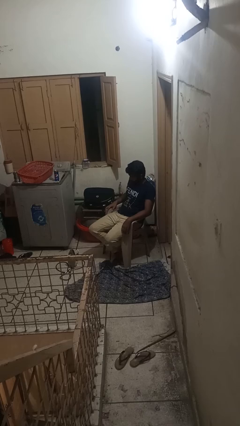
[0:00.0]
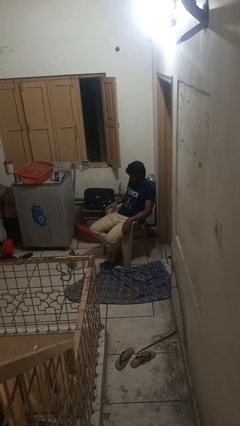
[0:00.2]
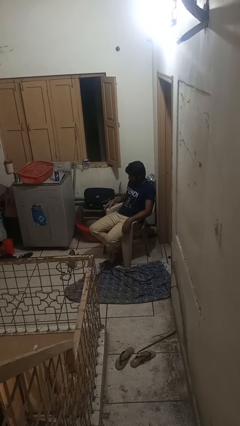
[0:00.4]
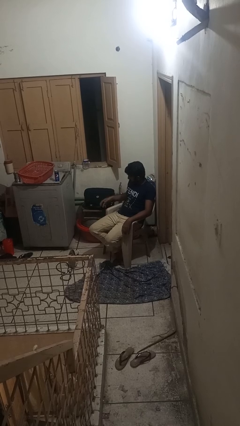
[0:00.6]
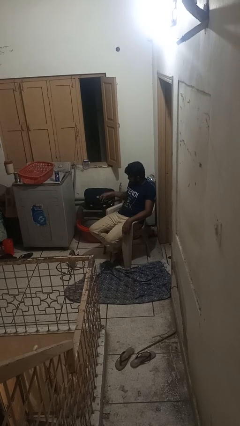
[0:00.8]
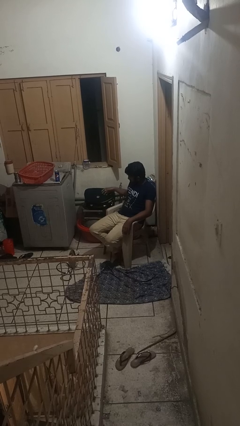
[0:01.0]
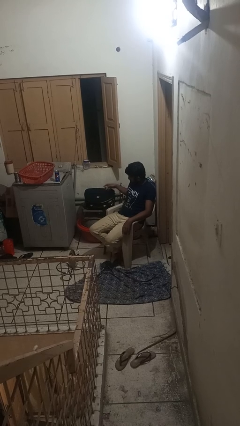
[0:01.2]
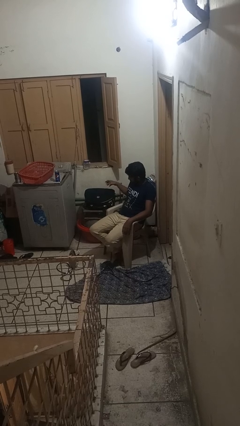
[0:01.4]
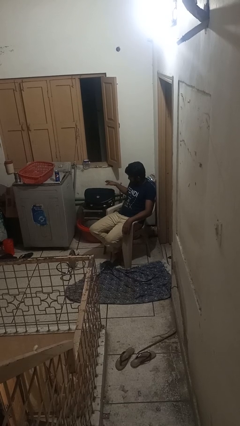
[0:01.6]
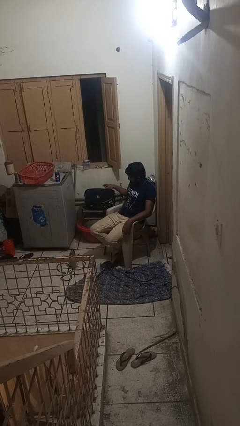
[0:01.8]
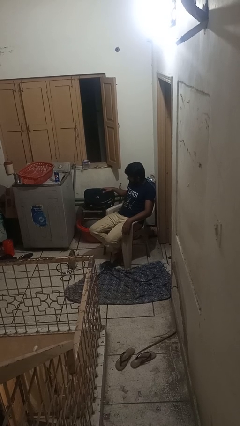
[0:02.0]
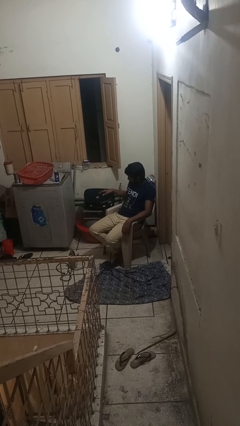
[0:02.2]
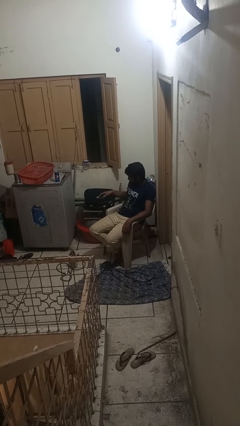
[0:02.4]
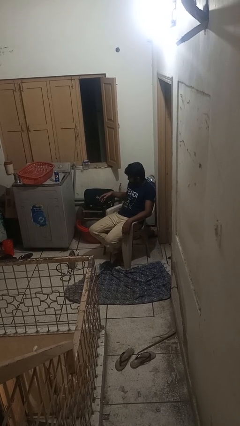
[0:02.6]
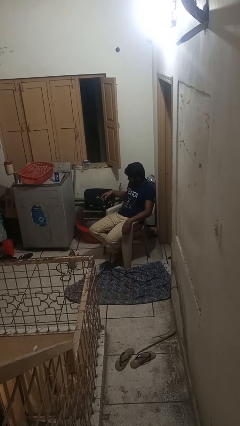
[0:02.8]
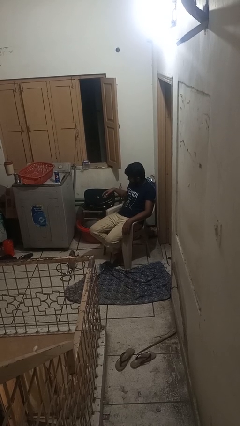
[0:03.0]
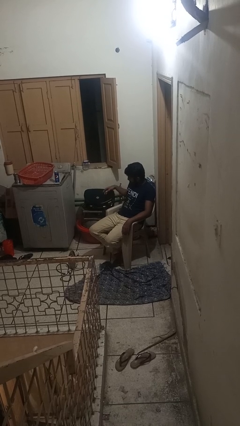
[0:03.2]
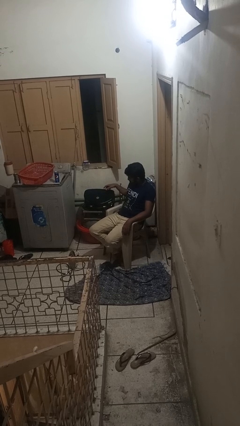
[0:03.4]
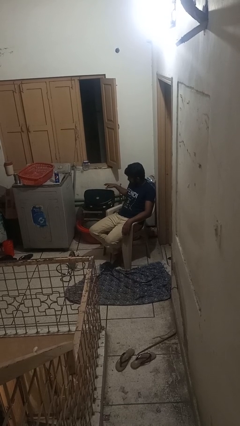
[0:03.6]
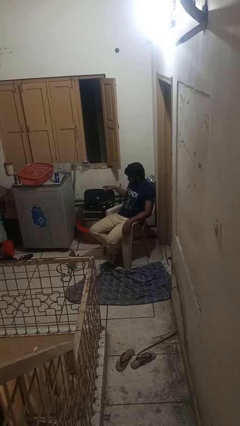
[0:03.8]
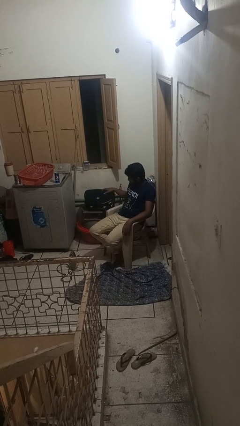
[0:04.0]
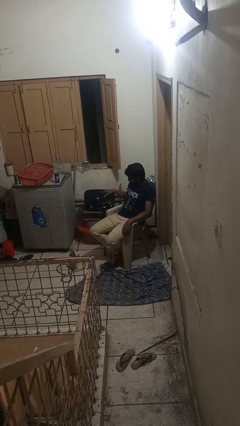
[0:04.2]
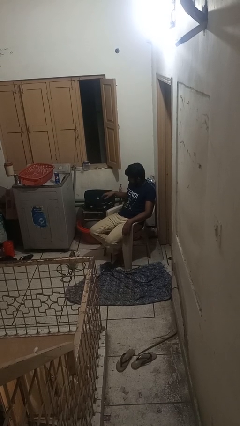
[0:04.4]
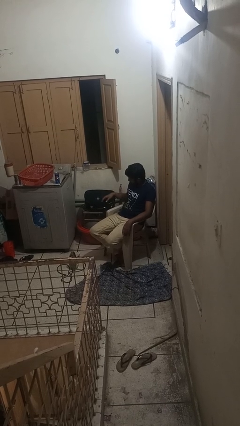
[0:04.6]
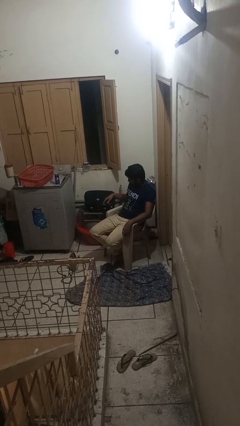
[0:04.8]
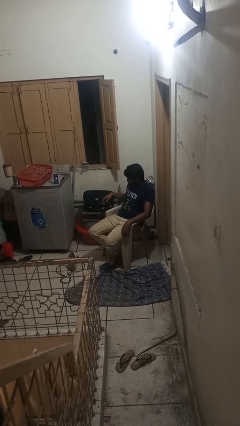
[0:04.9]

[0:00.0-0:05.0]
person waves hand over object

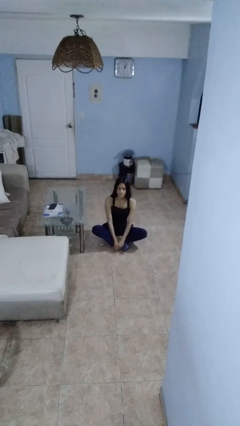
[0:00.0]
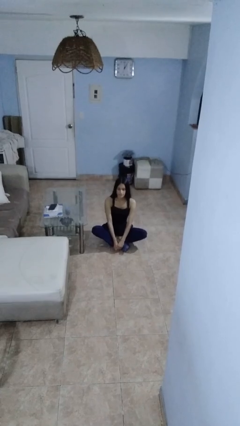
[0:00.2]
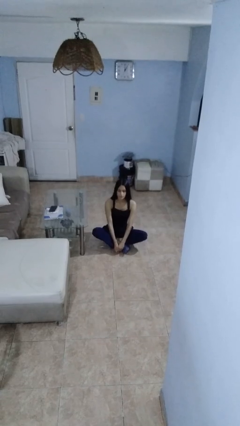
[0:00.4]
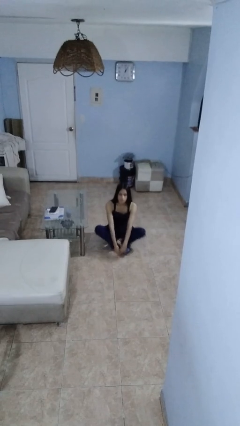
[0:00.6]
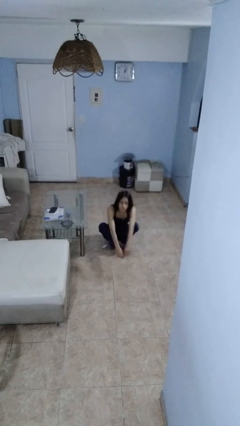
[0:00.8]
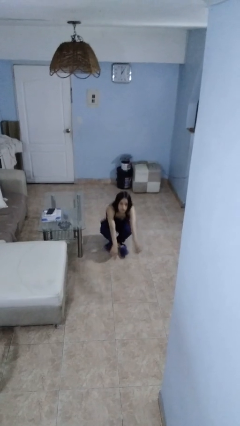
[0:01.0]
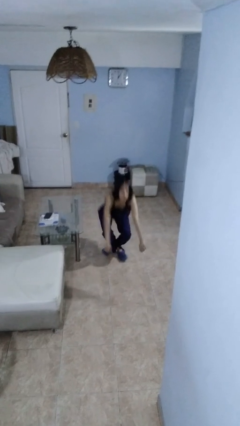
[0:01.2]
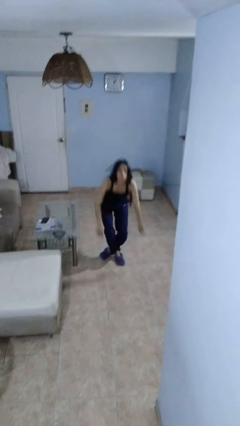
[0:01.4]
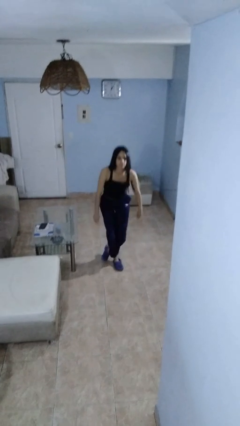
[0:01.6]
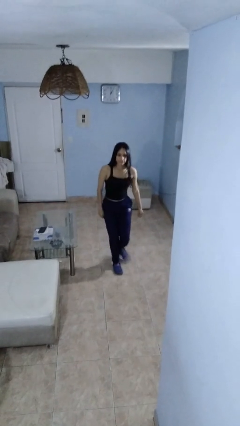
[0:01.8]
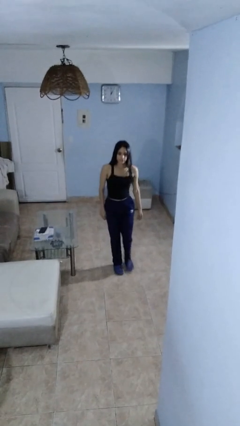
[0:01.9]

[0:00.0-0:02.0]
person stands up from floor

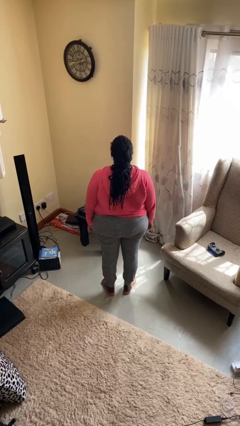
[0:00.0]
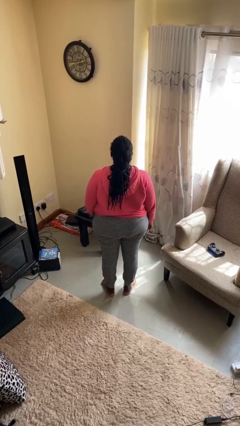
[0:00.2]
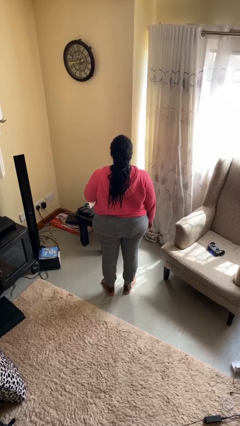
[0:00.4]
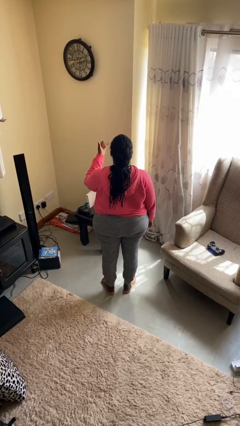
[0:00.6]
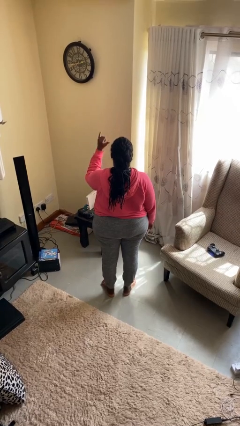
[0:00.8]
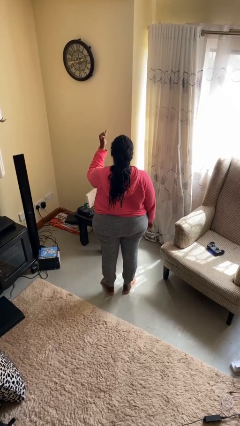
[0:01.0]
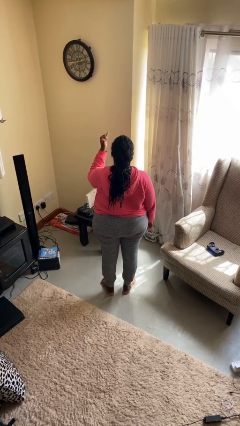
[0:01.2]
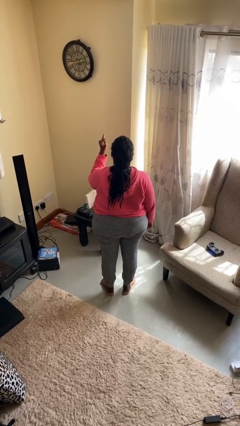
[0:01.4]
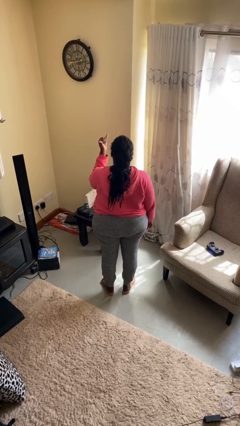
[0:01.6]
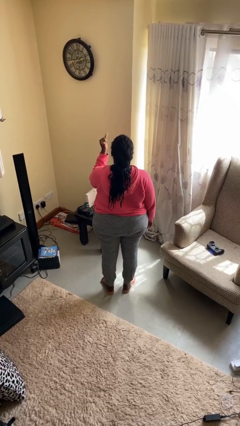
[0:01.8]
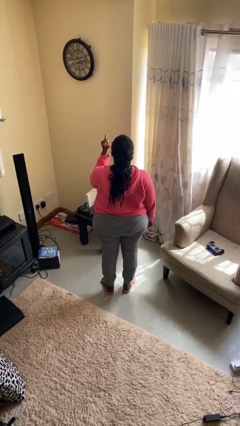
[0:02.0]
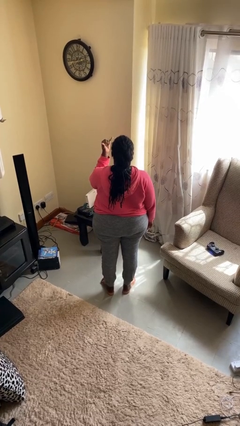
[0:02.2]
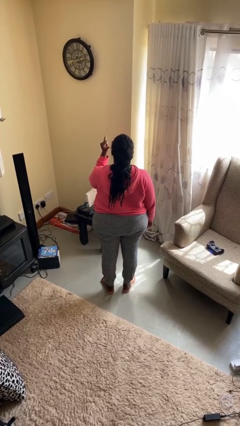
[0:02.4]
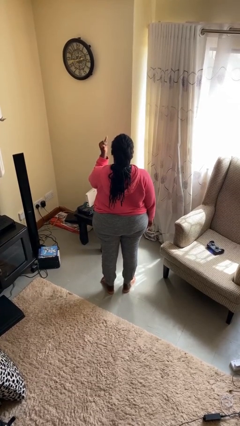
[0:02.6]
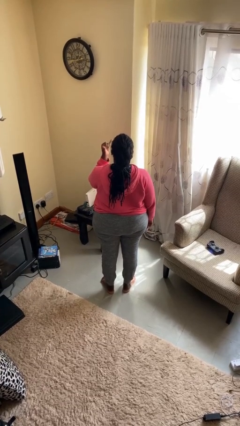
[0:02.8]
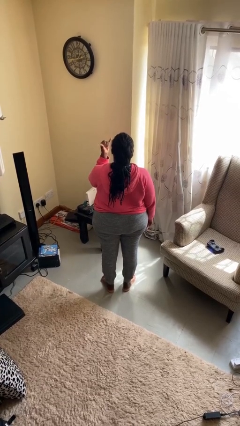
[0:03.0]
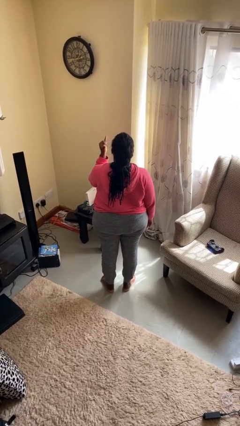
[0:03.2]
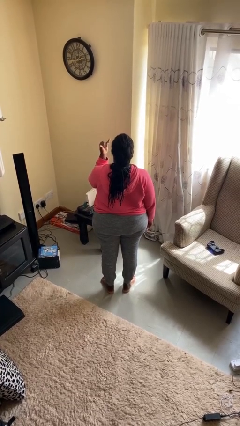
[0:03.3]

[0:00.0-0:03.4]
person gestures hang loose

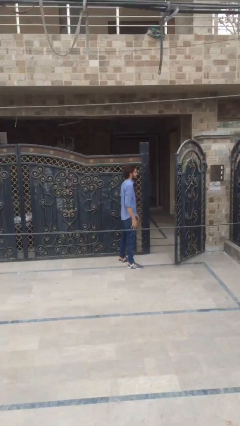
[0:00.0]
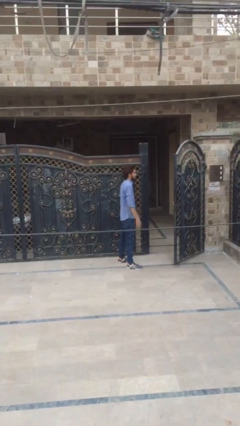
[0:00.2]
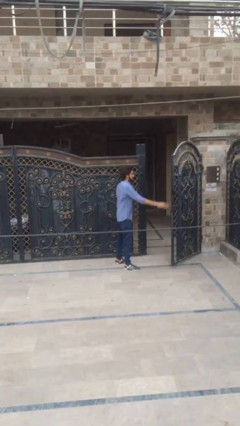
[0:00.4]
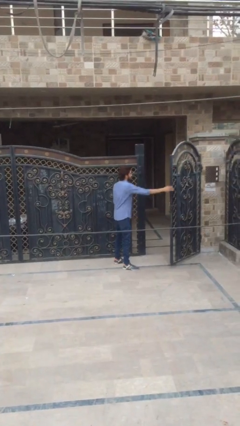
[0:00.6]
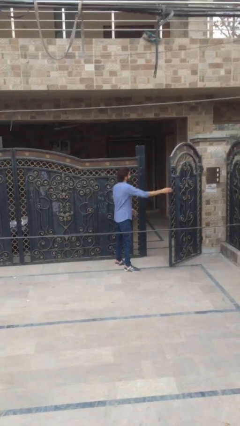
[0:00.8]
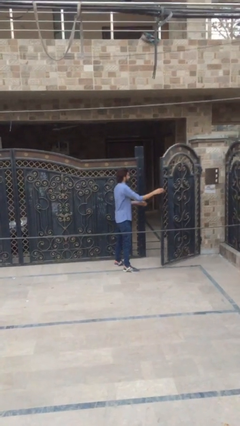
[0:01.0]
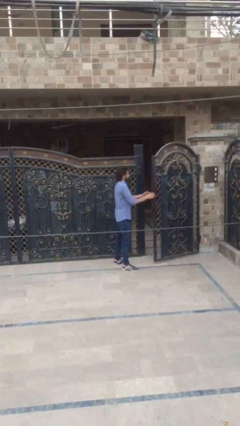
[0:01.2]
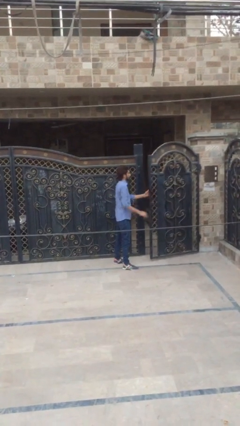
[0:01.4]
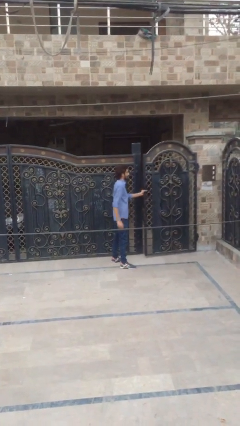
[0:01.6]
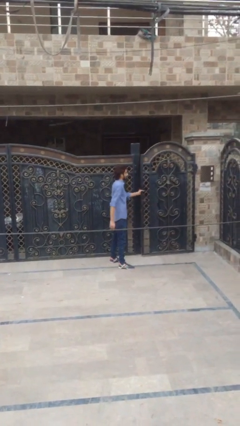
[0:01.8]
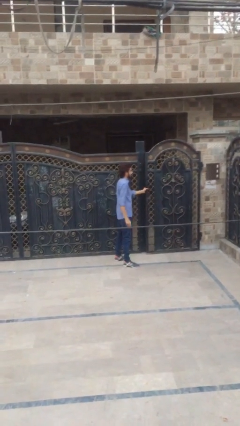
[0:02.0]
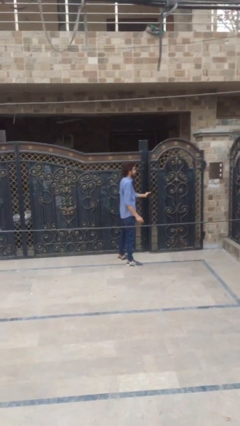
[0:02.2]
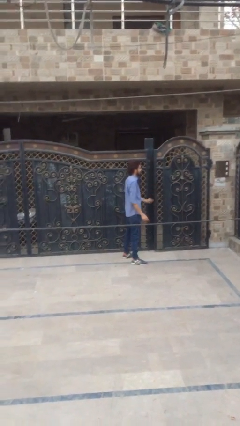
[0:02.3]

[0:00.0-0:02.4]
person closes facility door

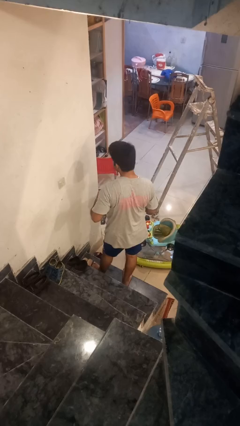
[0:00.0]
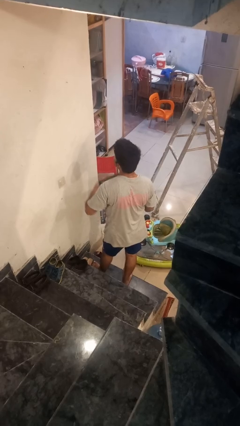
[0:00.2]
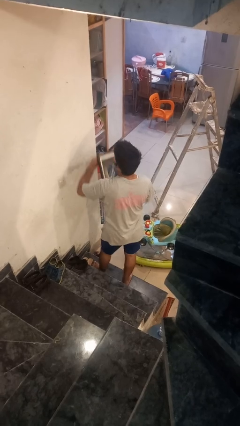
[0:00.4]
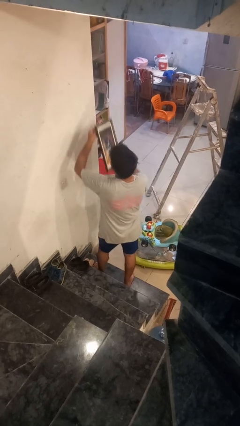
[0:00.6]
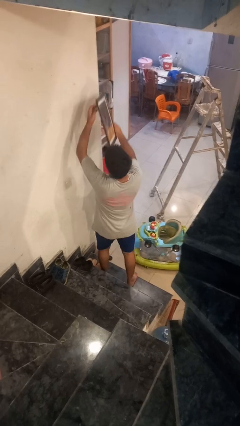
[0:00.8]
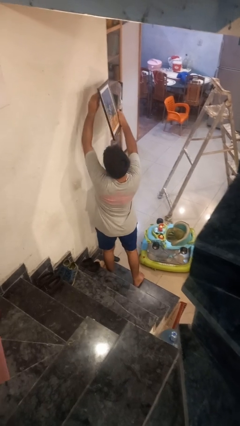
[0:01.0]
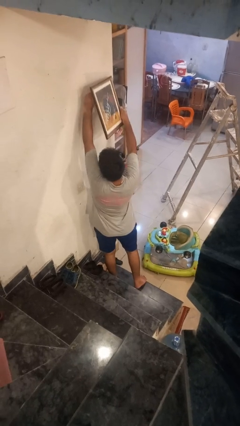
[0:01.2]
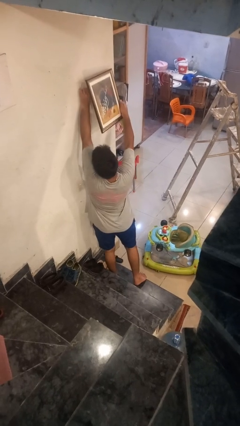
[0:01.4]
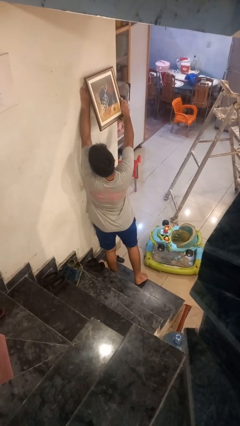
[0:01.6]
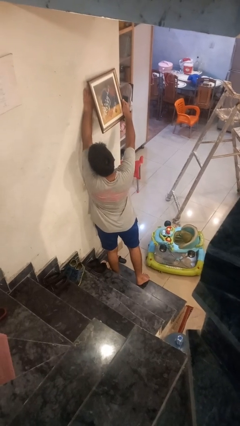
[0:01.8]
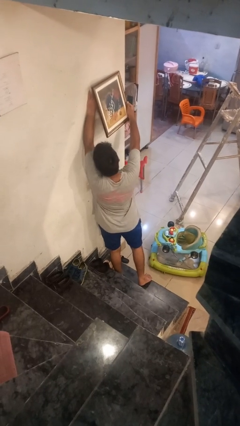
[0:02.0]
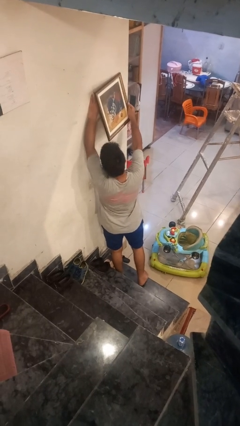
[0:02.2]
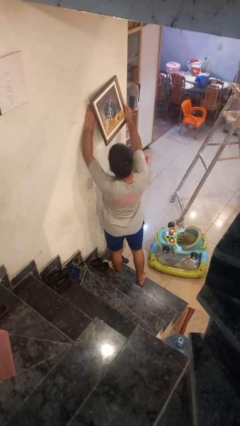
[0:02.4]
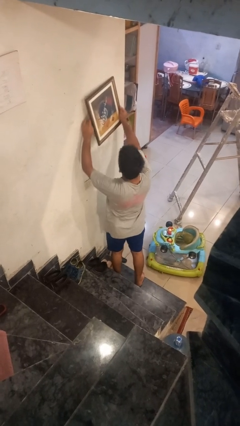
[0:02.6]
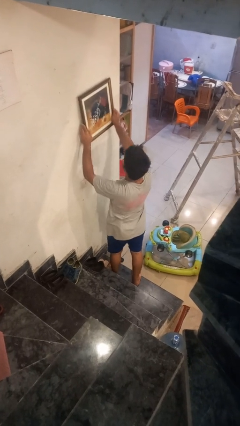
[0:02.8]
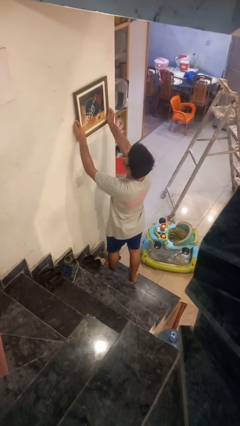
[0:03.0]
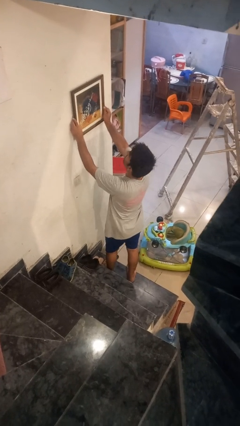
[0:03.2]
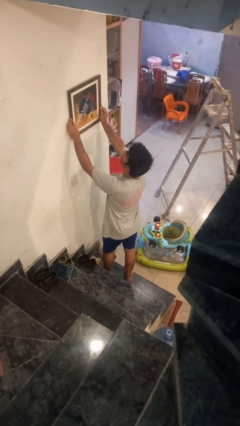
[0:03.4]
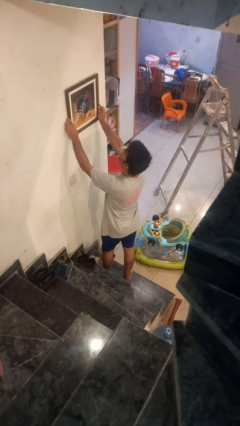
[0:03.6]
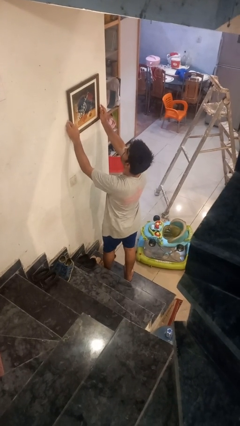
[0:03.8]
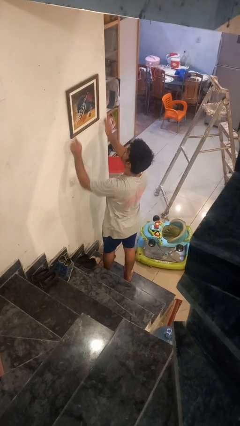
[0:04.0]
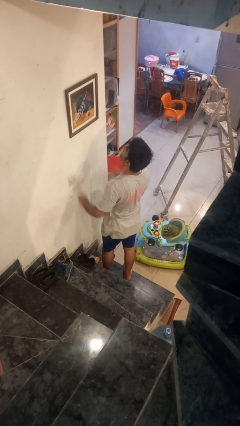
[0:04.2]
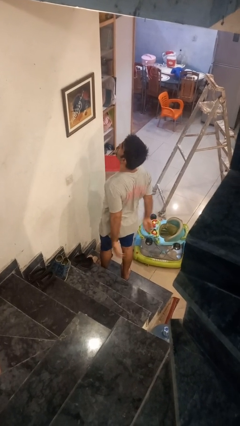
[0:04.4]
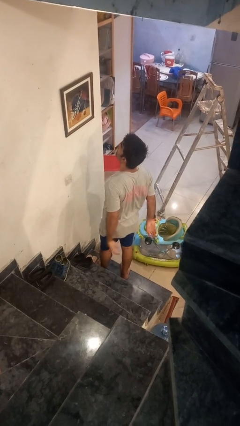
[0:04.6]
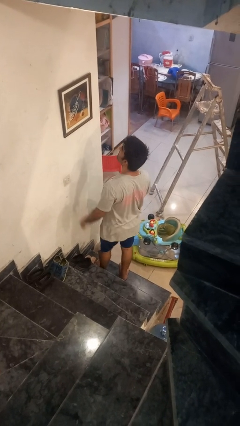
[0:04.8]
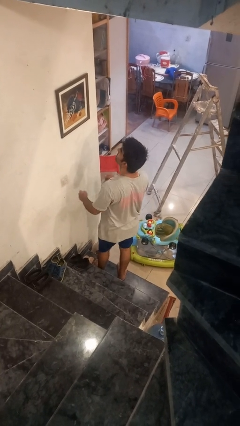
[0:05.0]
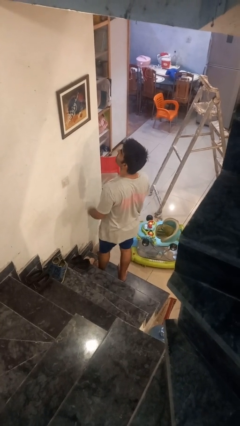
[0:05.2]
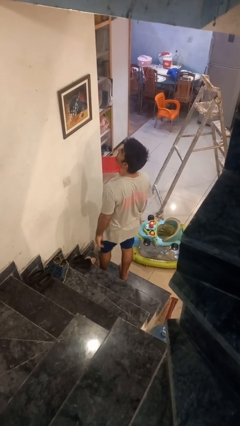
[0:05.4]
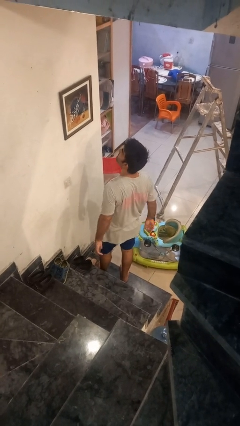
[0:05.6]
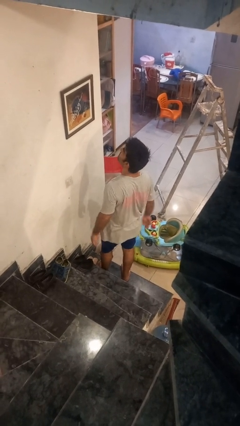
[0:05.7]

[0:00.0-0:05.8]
person puts up picture frame
